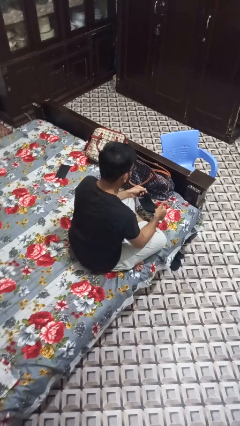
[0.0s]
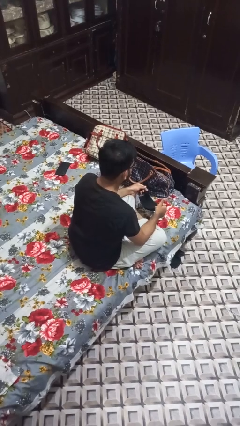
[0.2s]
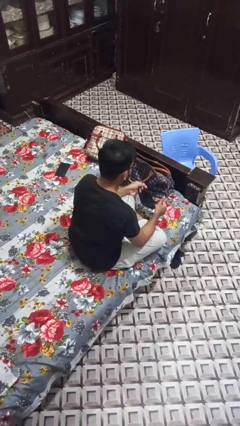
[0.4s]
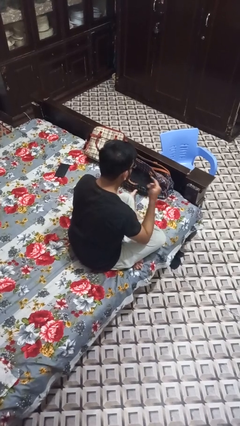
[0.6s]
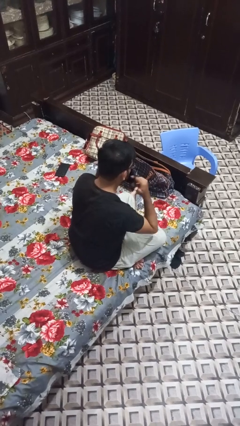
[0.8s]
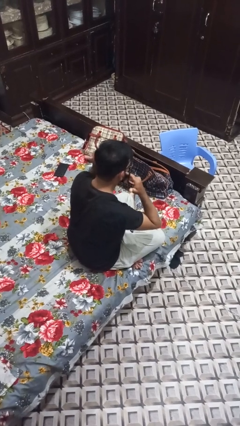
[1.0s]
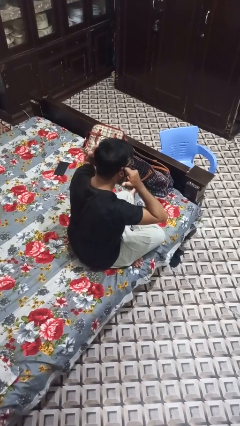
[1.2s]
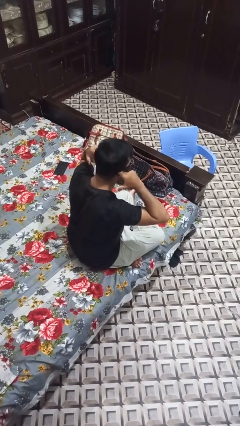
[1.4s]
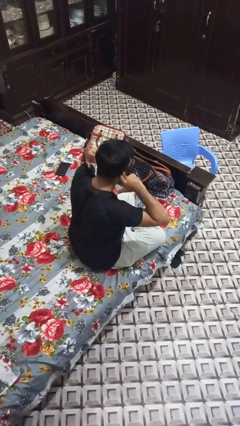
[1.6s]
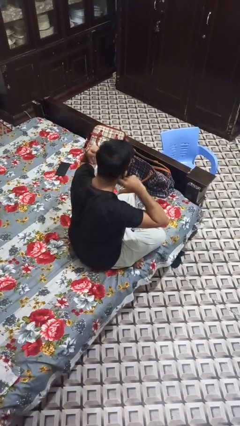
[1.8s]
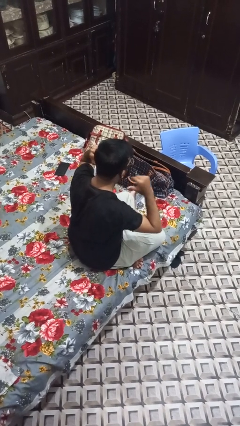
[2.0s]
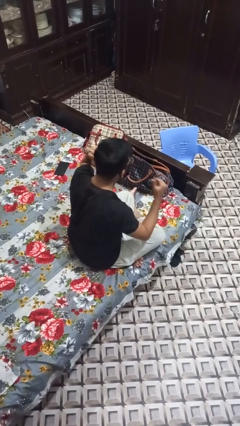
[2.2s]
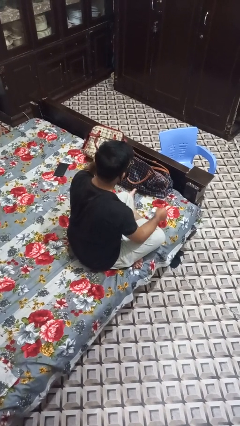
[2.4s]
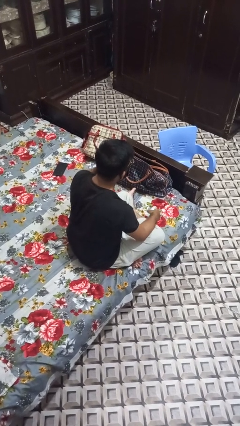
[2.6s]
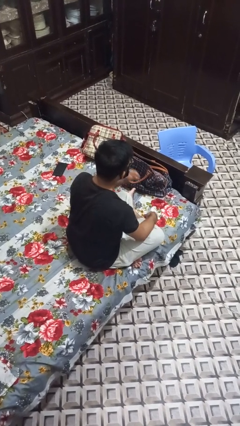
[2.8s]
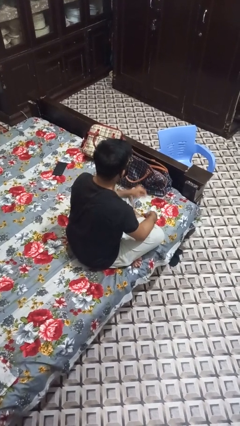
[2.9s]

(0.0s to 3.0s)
person puts on facemask

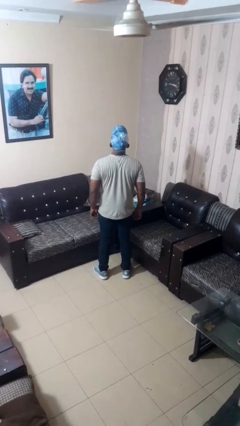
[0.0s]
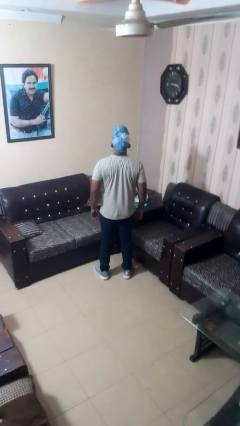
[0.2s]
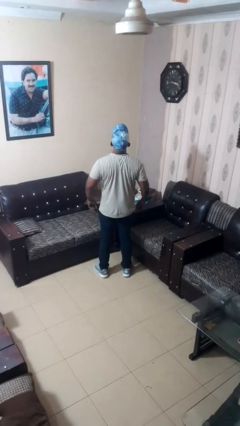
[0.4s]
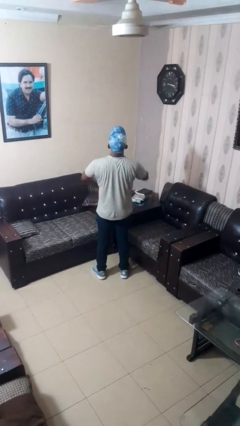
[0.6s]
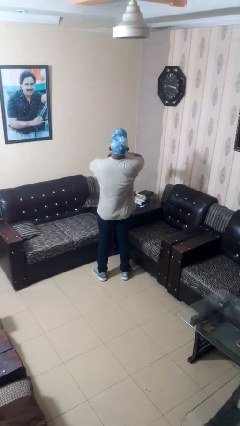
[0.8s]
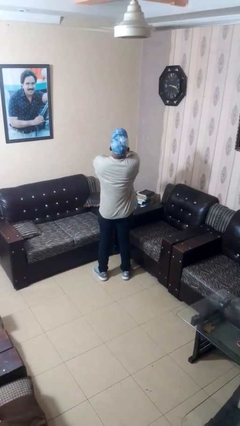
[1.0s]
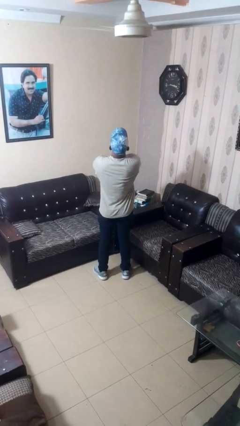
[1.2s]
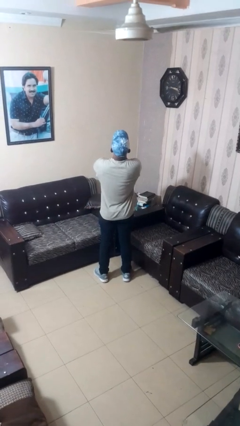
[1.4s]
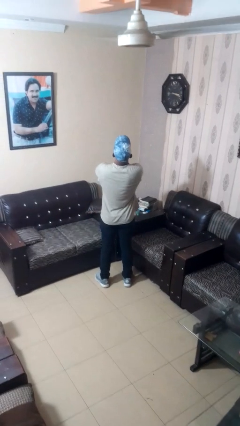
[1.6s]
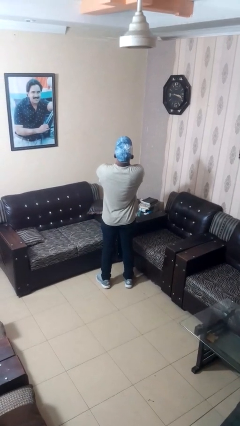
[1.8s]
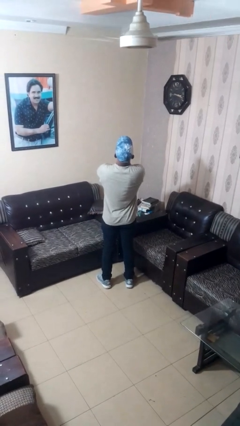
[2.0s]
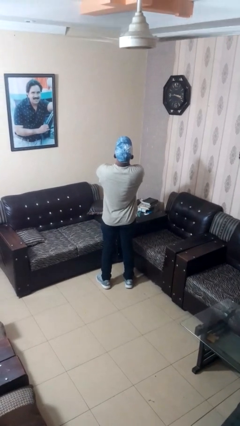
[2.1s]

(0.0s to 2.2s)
person crosses arms

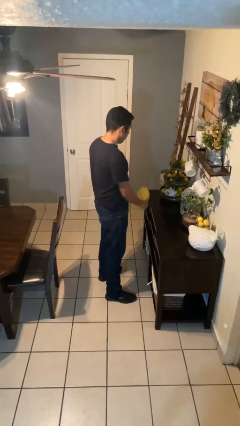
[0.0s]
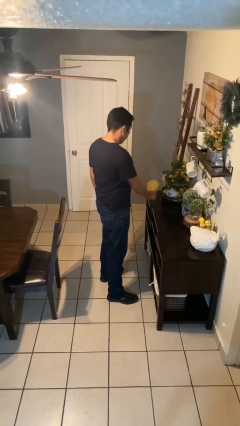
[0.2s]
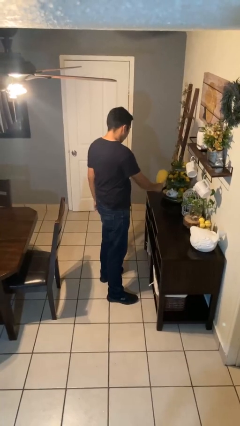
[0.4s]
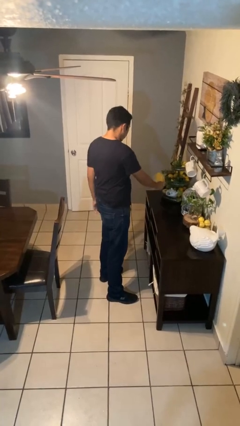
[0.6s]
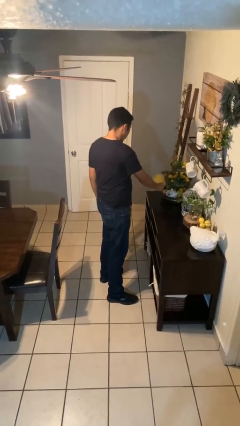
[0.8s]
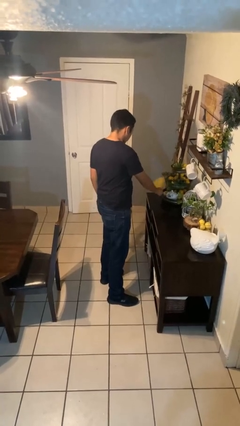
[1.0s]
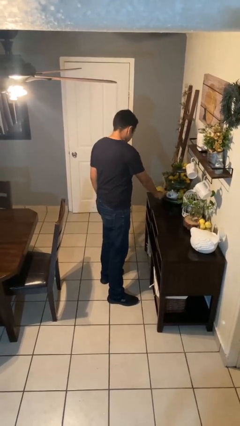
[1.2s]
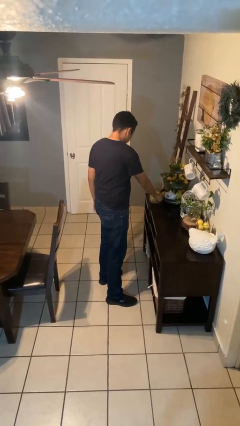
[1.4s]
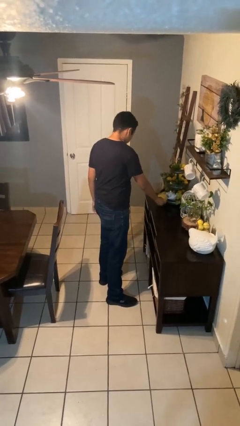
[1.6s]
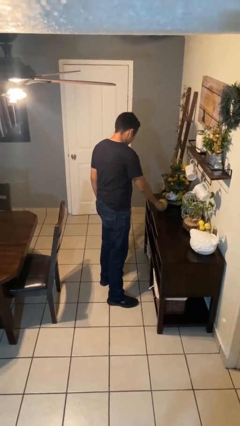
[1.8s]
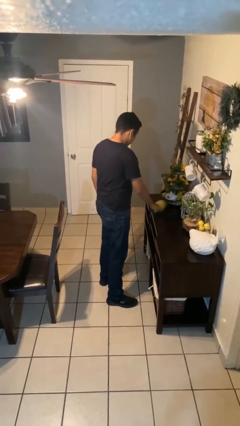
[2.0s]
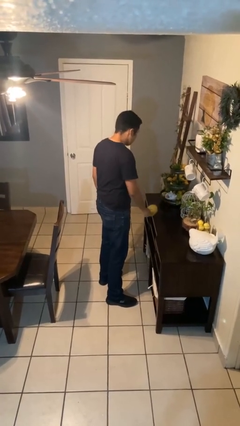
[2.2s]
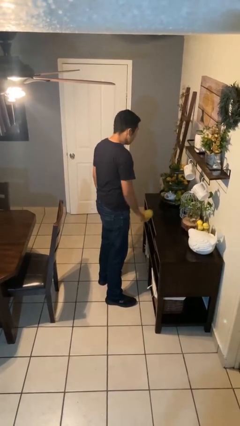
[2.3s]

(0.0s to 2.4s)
person dusts furniture

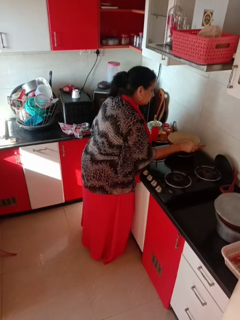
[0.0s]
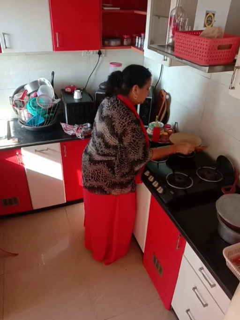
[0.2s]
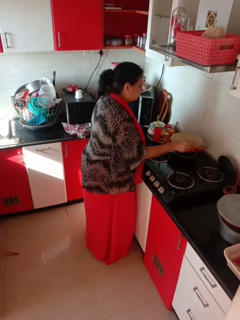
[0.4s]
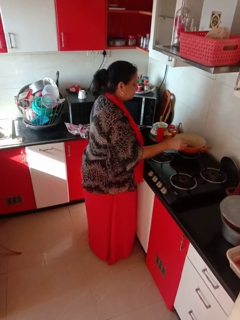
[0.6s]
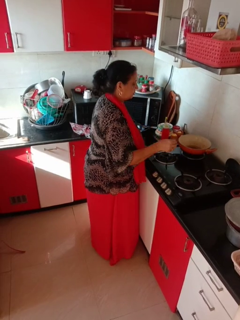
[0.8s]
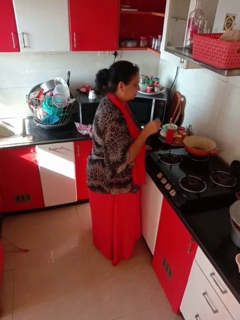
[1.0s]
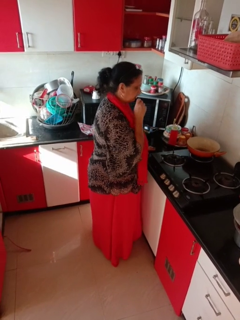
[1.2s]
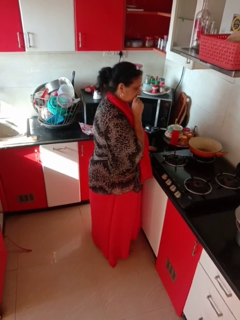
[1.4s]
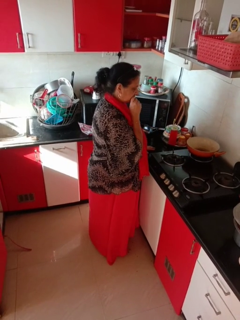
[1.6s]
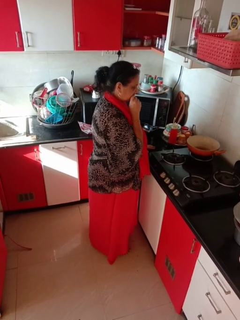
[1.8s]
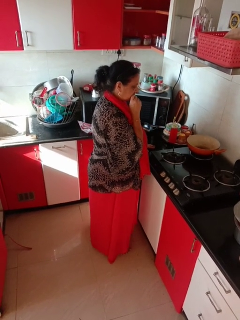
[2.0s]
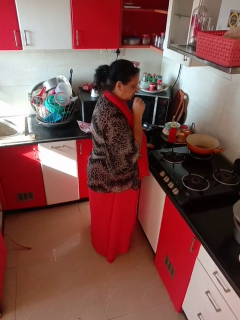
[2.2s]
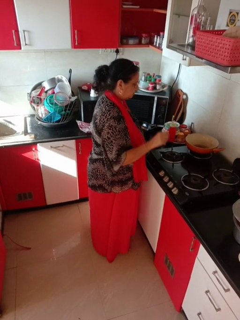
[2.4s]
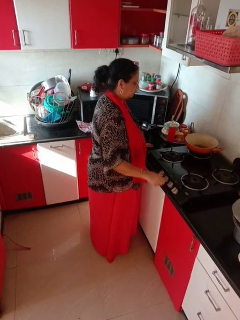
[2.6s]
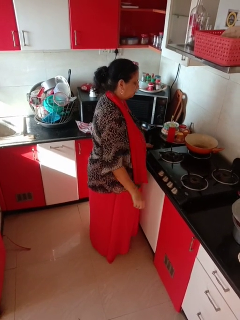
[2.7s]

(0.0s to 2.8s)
person burns hand

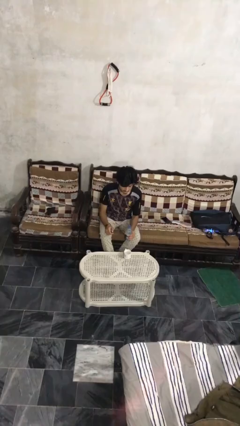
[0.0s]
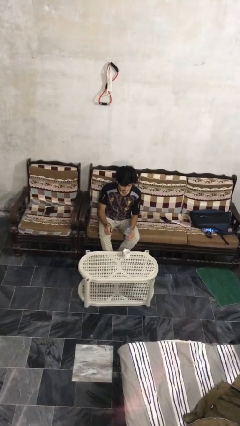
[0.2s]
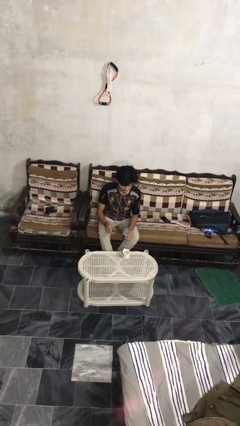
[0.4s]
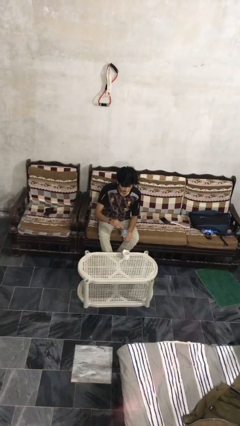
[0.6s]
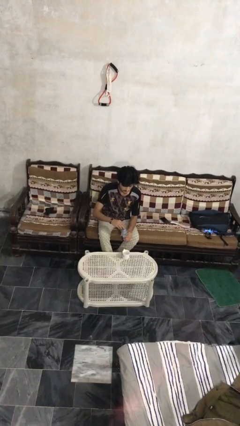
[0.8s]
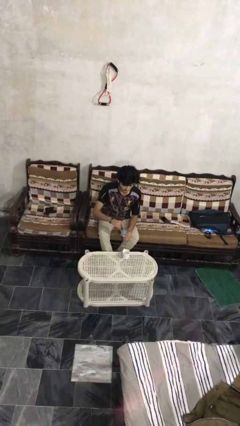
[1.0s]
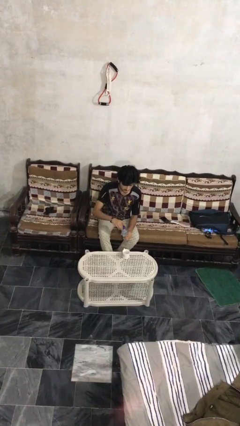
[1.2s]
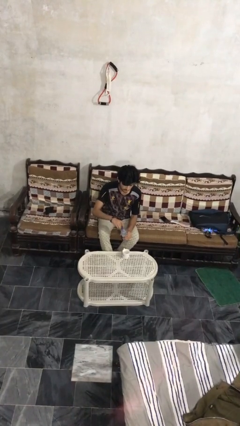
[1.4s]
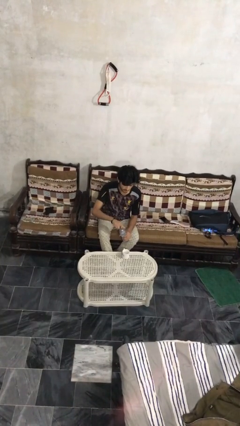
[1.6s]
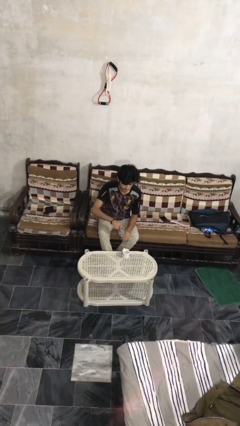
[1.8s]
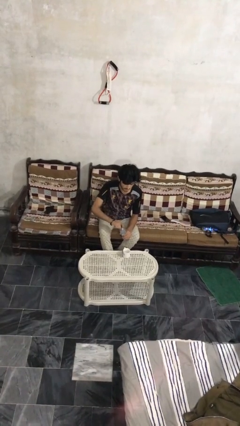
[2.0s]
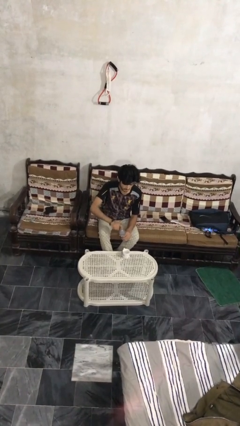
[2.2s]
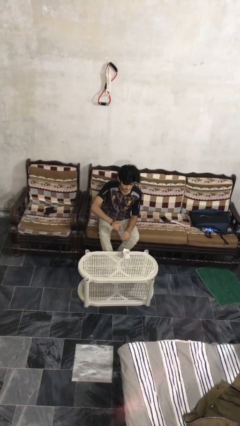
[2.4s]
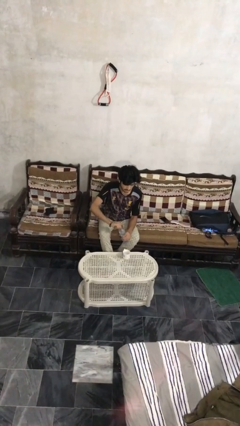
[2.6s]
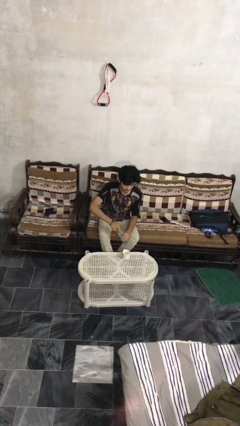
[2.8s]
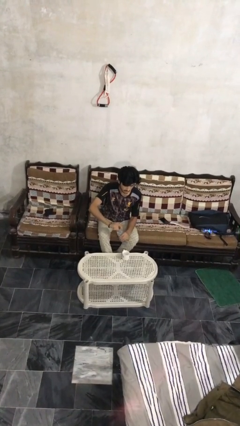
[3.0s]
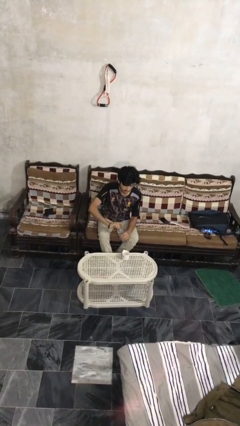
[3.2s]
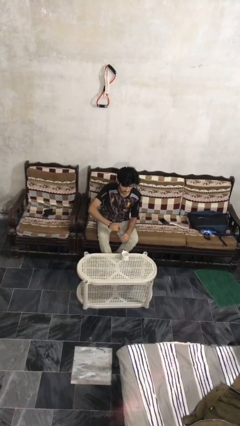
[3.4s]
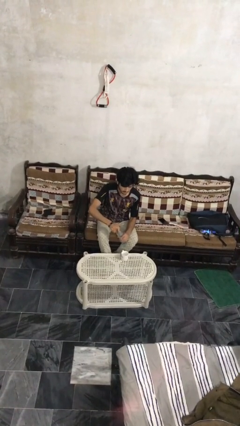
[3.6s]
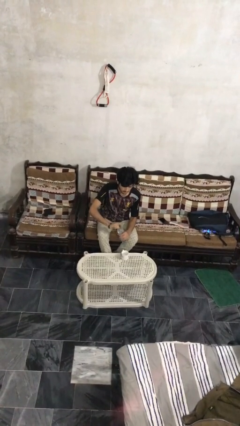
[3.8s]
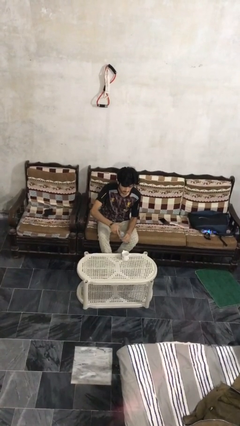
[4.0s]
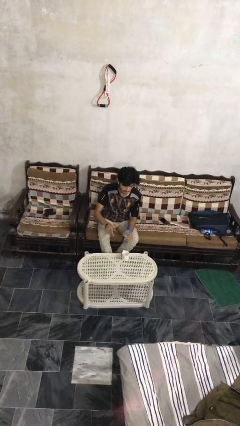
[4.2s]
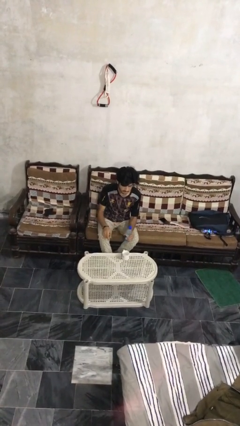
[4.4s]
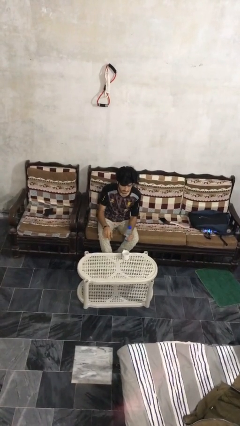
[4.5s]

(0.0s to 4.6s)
person screws lid to bottle

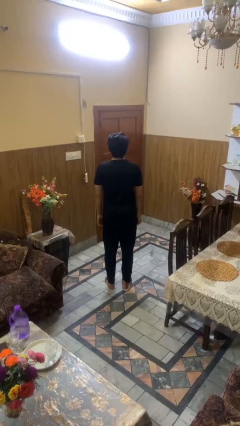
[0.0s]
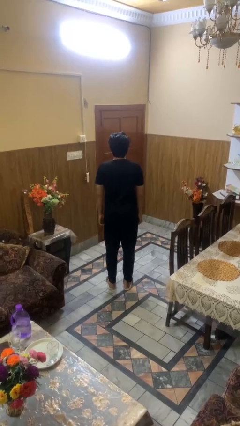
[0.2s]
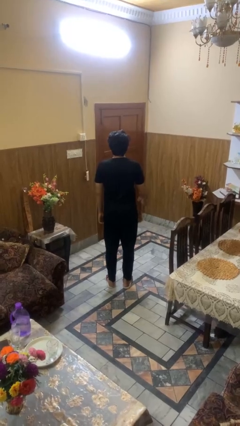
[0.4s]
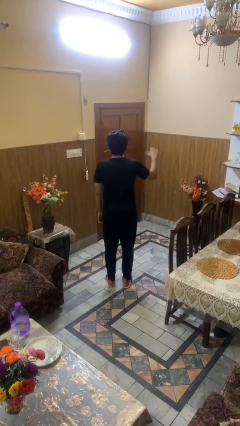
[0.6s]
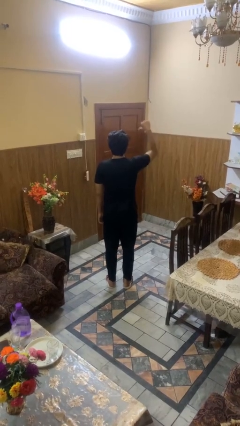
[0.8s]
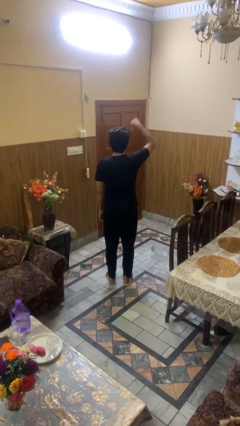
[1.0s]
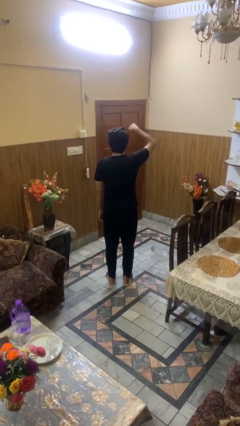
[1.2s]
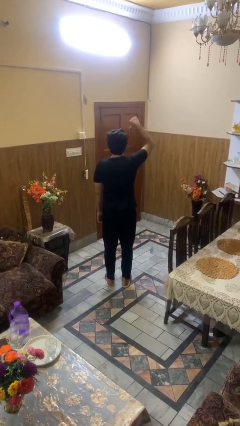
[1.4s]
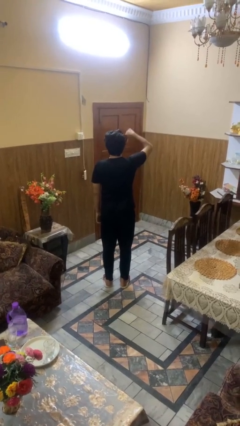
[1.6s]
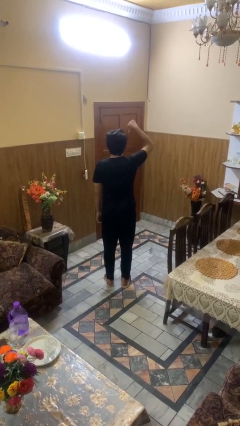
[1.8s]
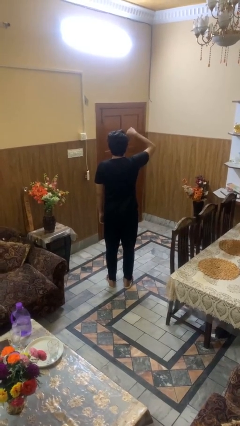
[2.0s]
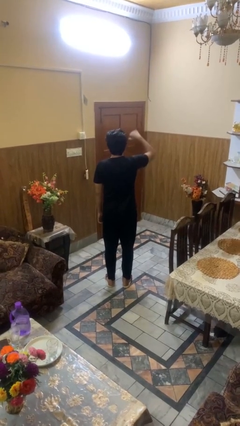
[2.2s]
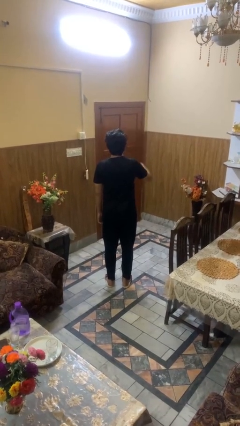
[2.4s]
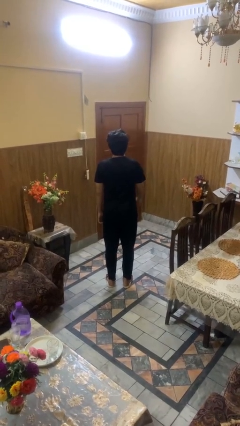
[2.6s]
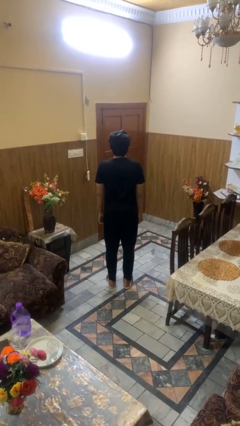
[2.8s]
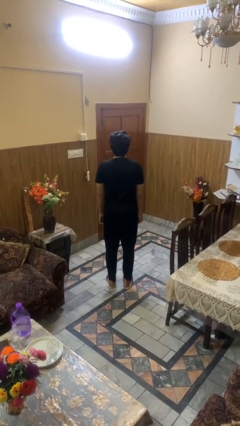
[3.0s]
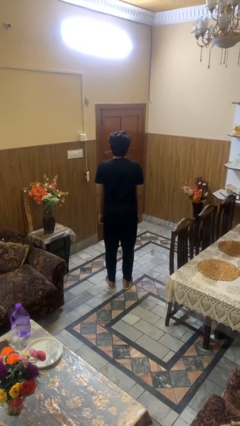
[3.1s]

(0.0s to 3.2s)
person gestures thumbs down
